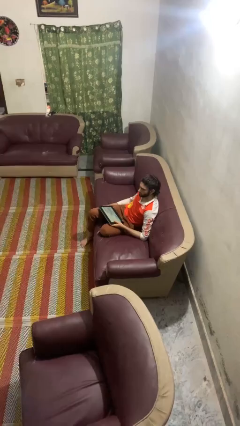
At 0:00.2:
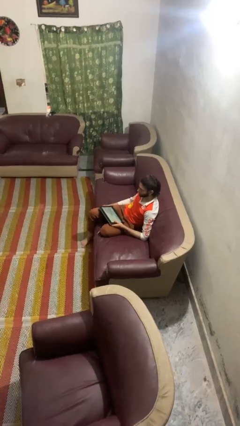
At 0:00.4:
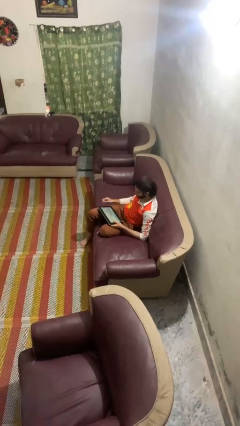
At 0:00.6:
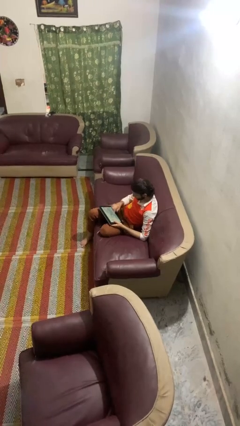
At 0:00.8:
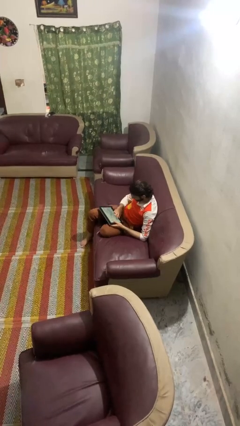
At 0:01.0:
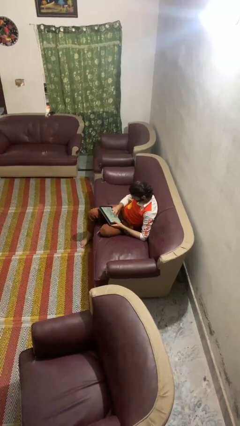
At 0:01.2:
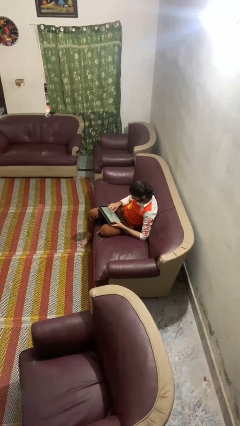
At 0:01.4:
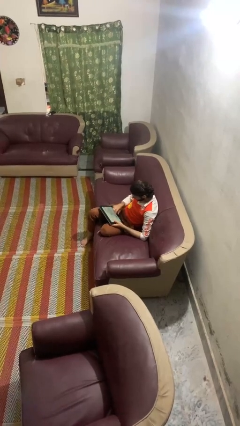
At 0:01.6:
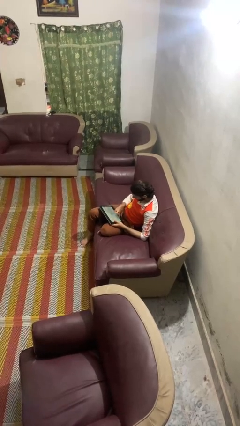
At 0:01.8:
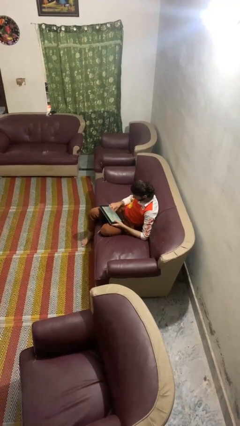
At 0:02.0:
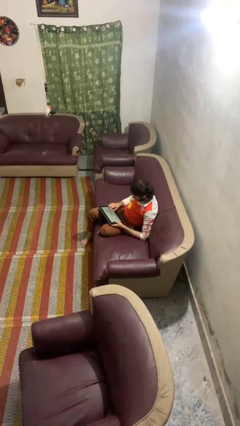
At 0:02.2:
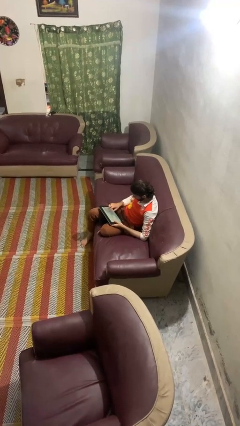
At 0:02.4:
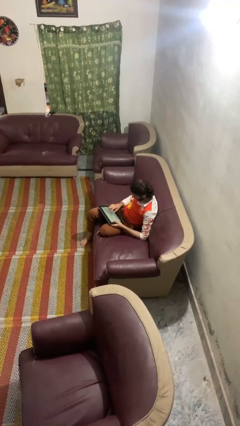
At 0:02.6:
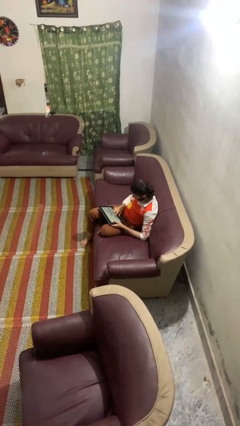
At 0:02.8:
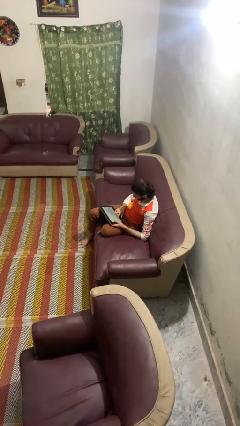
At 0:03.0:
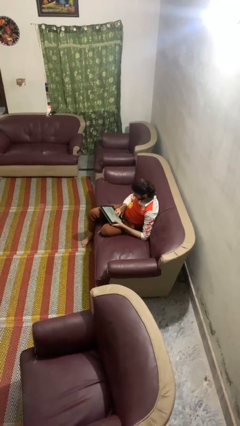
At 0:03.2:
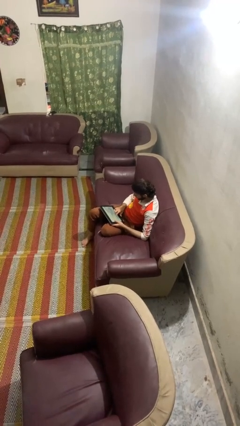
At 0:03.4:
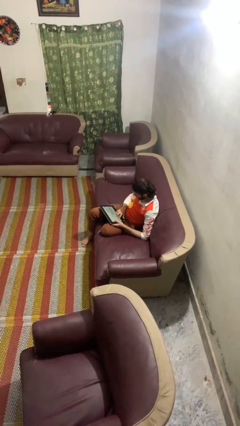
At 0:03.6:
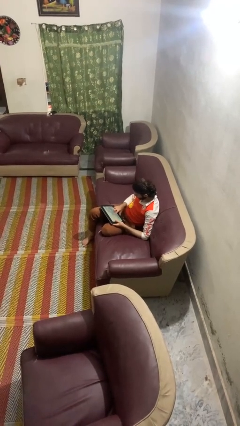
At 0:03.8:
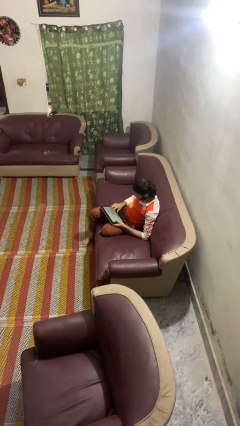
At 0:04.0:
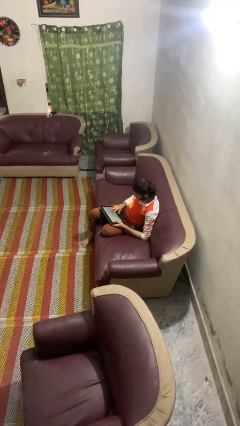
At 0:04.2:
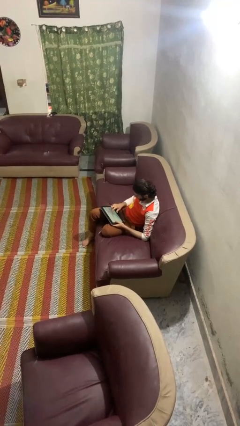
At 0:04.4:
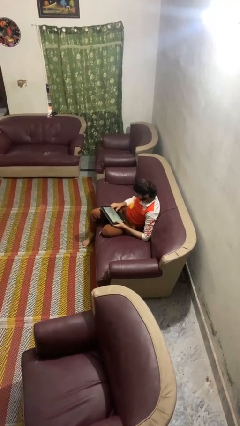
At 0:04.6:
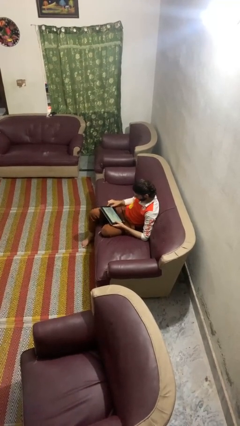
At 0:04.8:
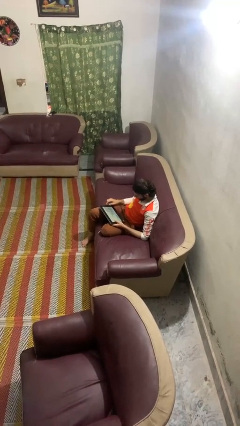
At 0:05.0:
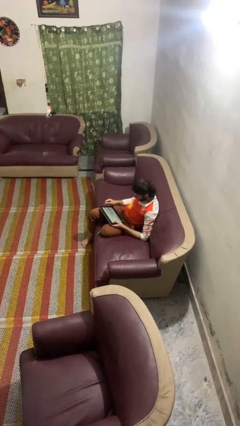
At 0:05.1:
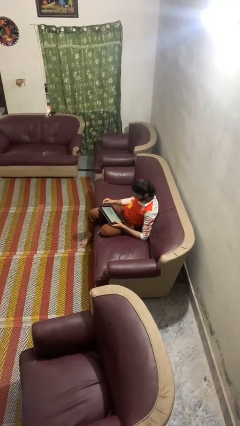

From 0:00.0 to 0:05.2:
person interacts with tablet

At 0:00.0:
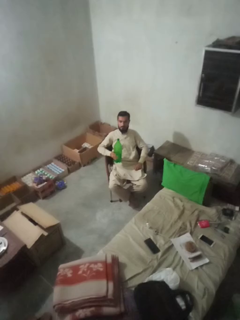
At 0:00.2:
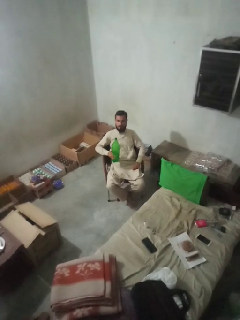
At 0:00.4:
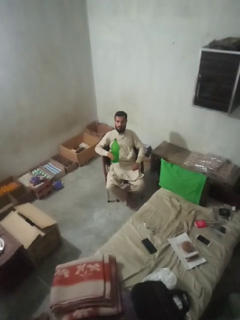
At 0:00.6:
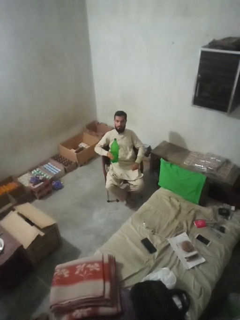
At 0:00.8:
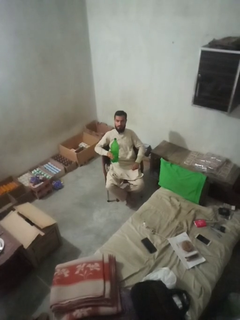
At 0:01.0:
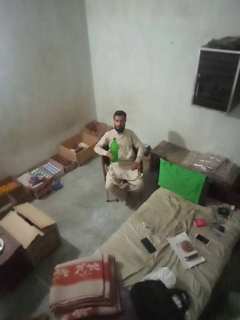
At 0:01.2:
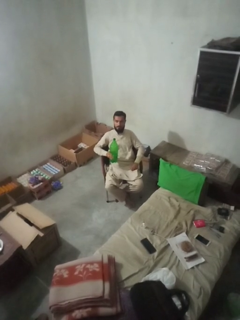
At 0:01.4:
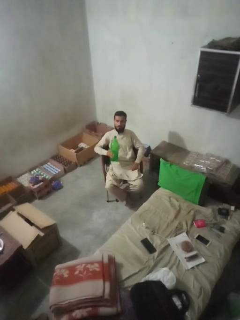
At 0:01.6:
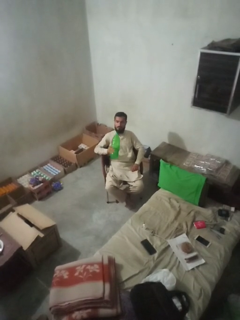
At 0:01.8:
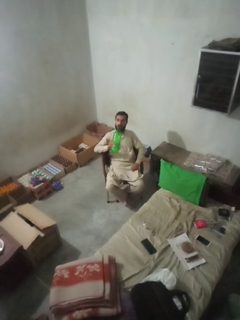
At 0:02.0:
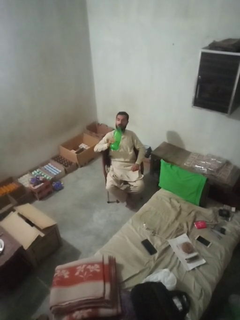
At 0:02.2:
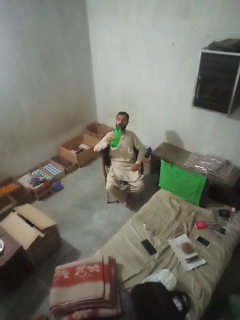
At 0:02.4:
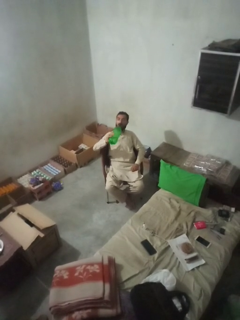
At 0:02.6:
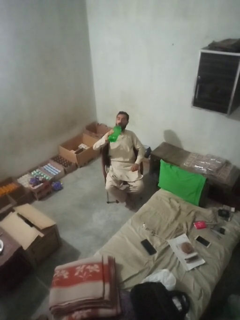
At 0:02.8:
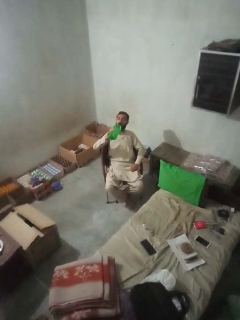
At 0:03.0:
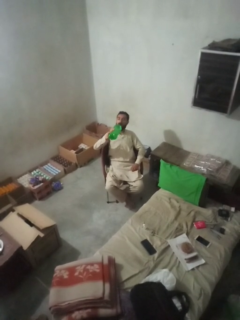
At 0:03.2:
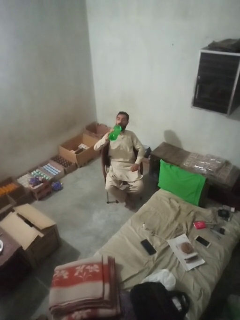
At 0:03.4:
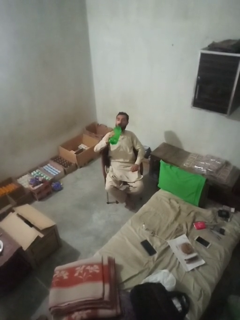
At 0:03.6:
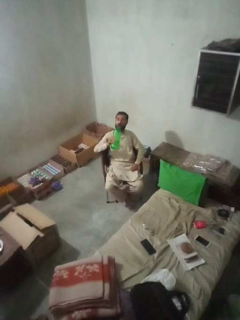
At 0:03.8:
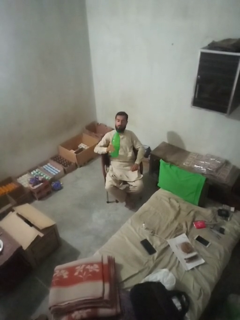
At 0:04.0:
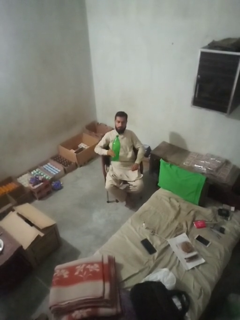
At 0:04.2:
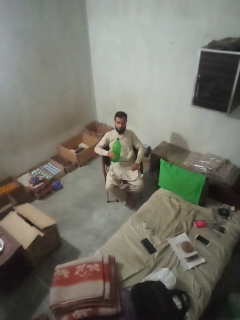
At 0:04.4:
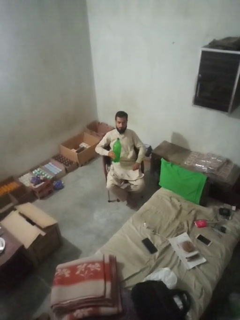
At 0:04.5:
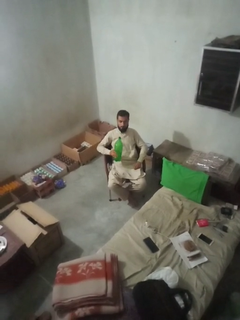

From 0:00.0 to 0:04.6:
person drinks from bottle

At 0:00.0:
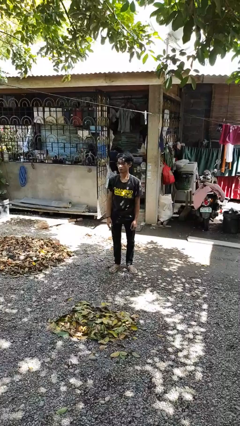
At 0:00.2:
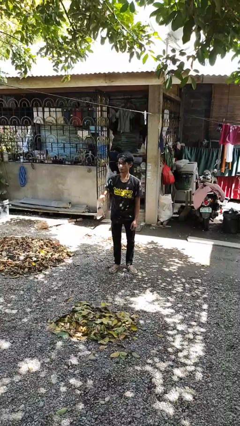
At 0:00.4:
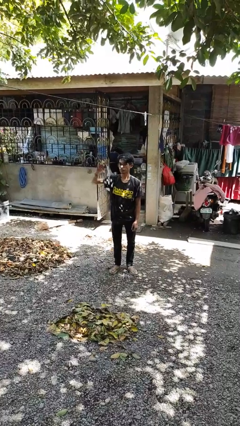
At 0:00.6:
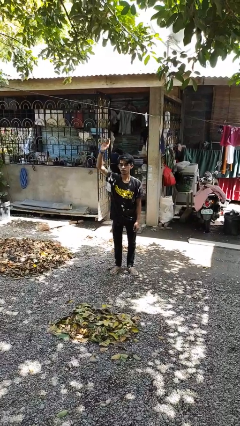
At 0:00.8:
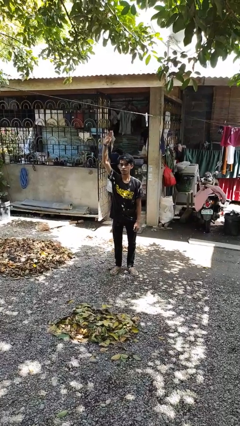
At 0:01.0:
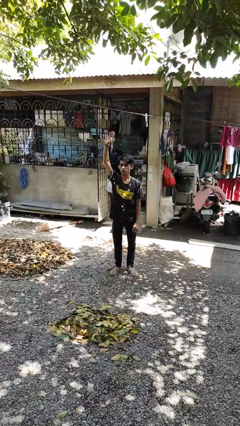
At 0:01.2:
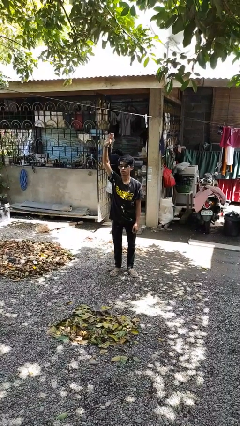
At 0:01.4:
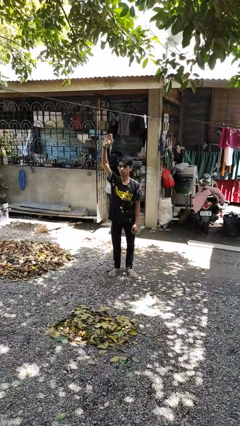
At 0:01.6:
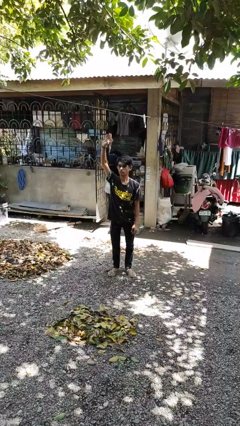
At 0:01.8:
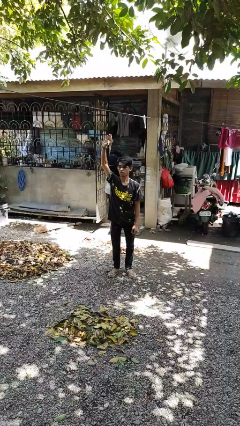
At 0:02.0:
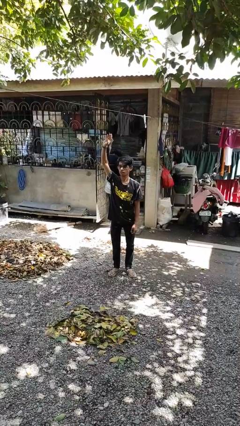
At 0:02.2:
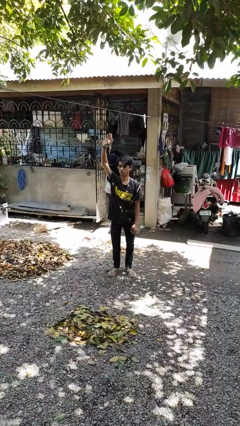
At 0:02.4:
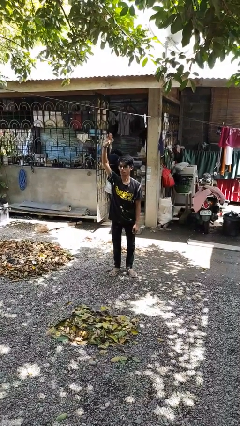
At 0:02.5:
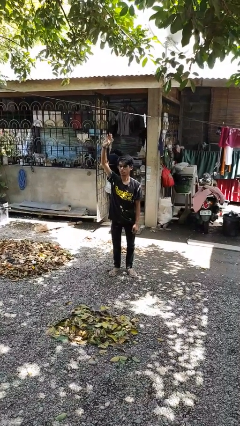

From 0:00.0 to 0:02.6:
person gestures raise hand

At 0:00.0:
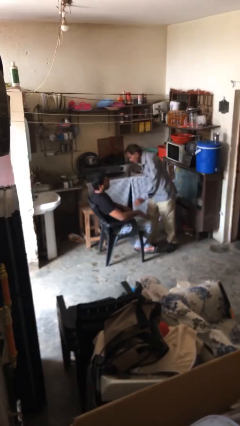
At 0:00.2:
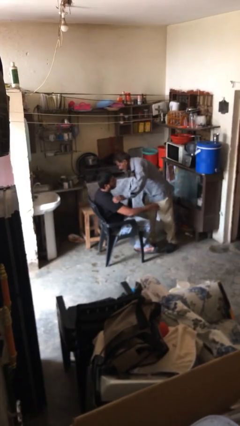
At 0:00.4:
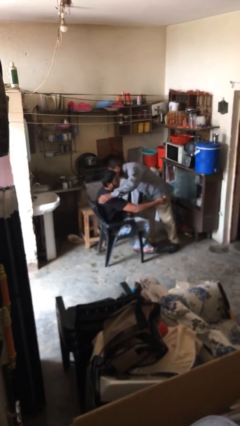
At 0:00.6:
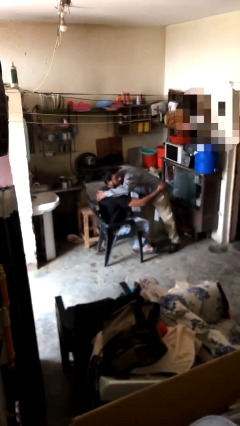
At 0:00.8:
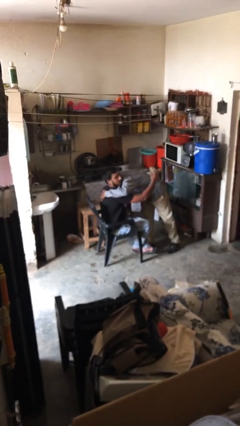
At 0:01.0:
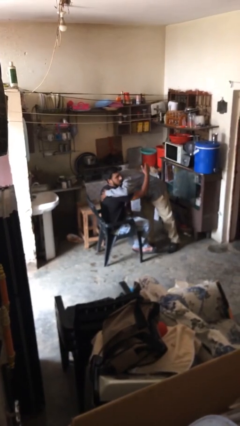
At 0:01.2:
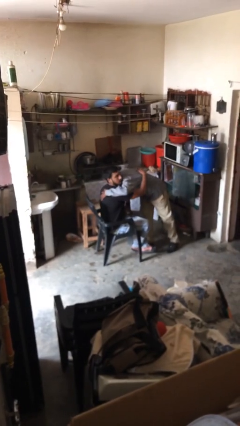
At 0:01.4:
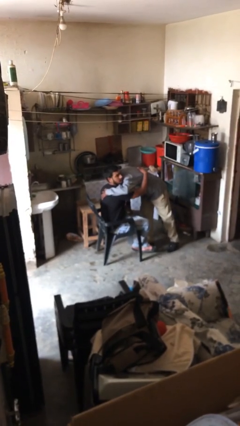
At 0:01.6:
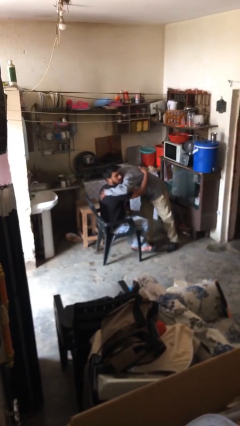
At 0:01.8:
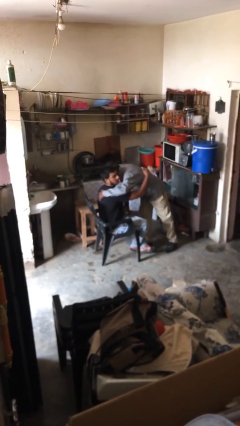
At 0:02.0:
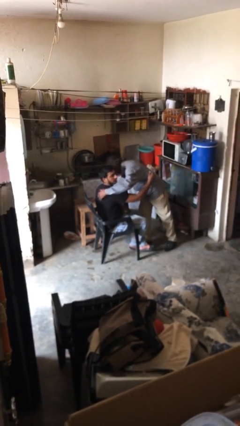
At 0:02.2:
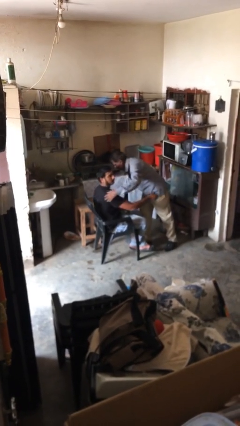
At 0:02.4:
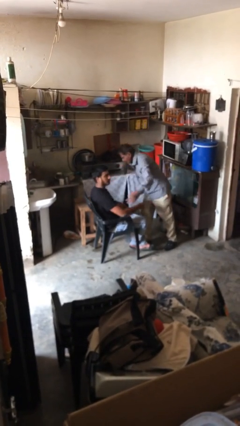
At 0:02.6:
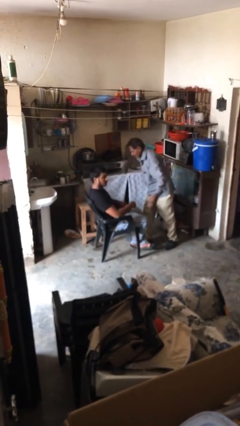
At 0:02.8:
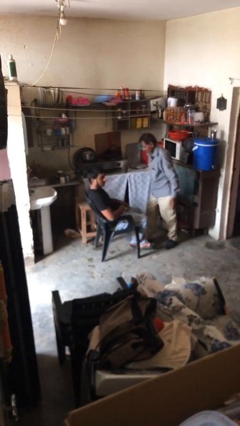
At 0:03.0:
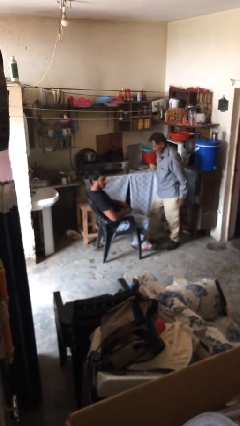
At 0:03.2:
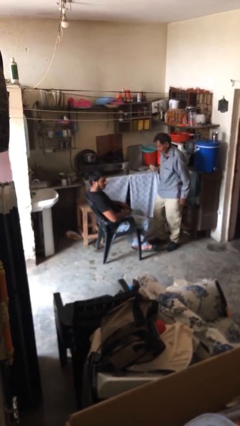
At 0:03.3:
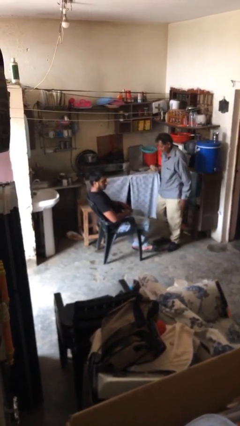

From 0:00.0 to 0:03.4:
person embraces person

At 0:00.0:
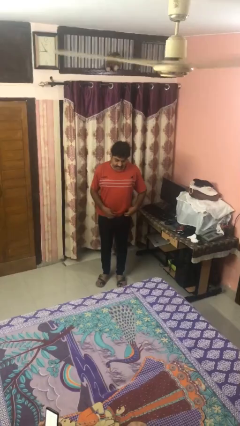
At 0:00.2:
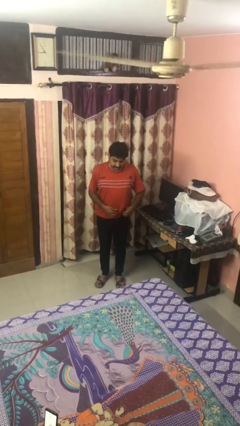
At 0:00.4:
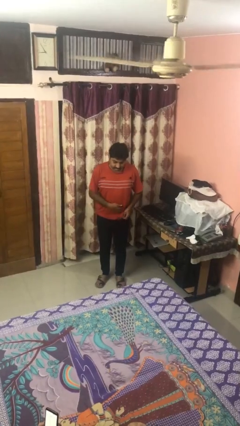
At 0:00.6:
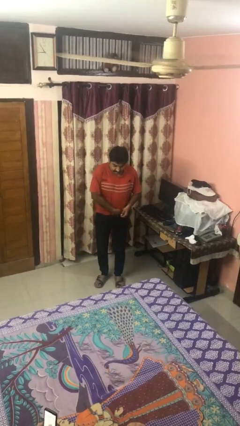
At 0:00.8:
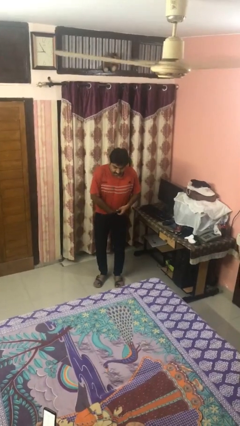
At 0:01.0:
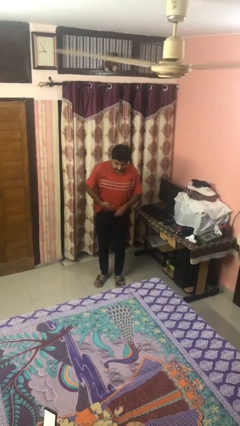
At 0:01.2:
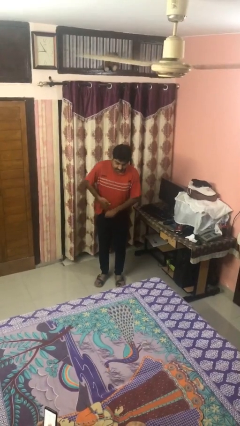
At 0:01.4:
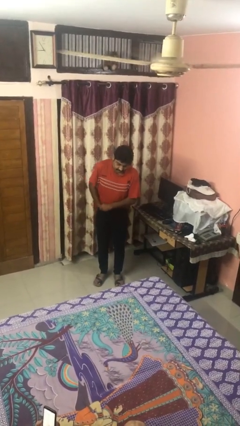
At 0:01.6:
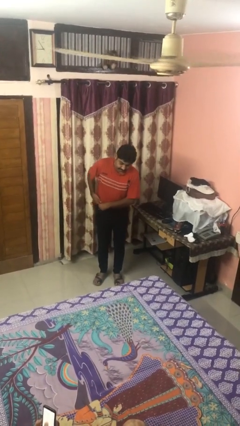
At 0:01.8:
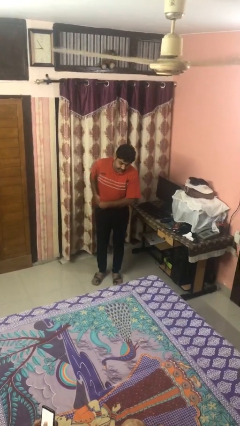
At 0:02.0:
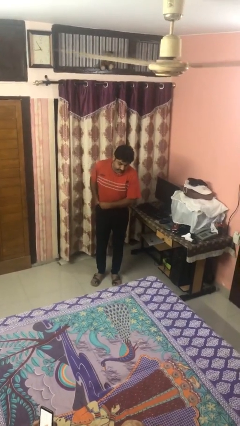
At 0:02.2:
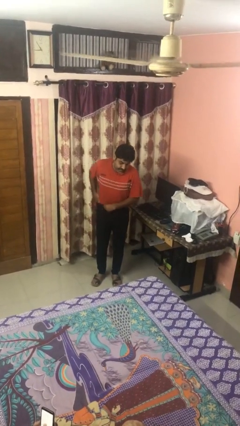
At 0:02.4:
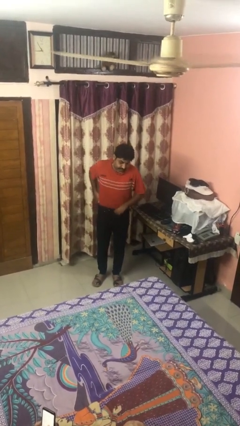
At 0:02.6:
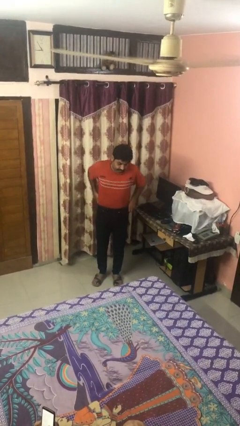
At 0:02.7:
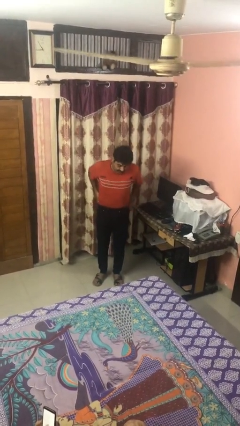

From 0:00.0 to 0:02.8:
person tucks in shirt
